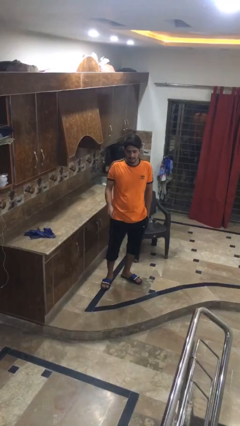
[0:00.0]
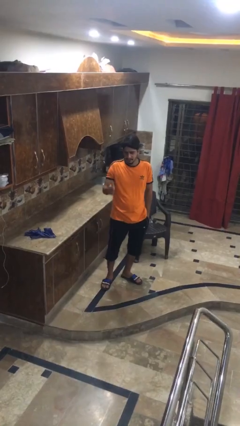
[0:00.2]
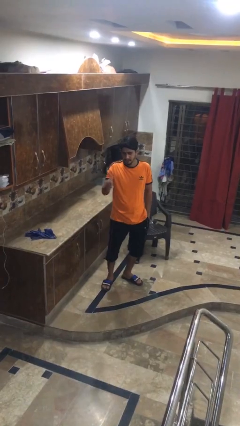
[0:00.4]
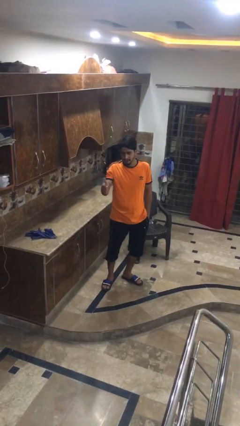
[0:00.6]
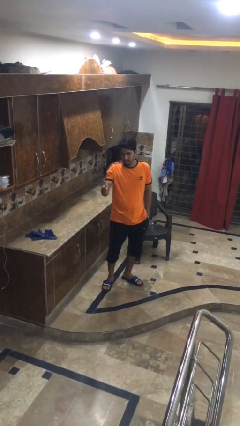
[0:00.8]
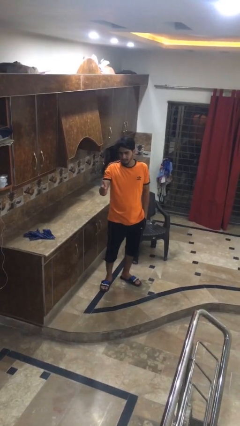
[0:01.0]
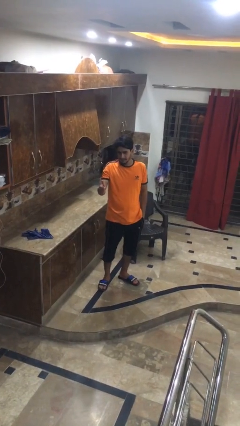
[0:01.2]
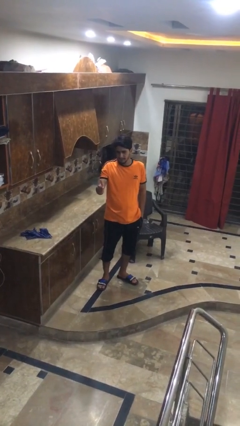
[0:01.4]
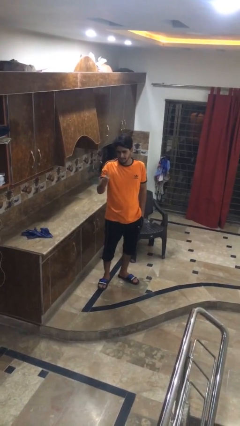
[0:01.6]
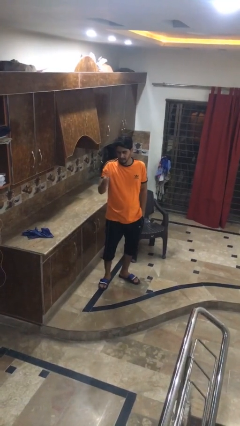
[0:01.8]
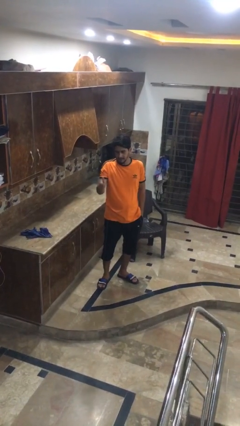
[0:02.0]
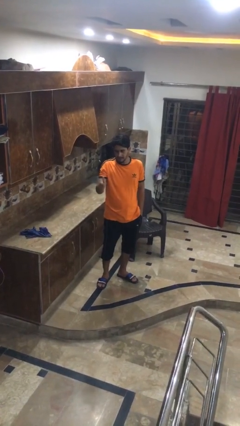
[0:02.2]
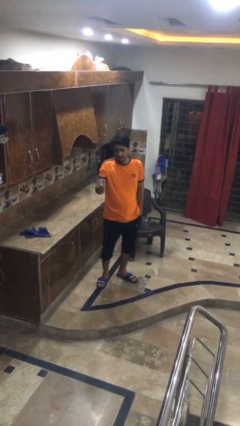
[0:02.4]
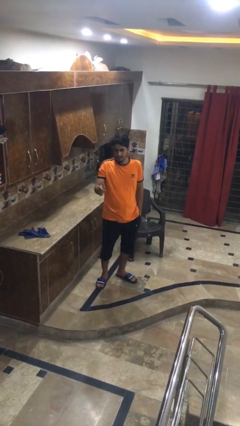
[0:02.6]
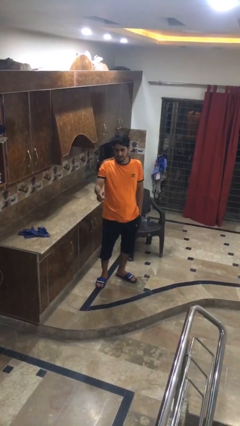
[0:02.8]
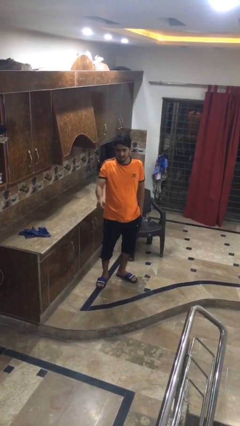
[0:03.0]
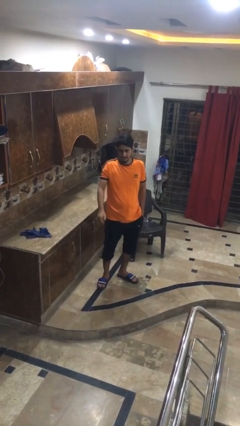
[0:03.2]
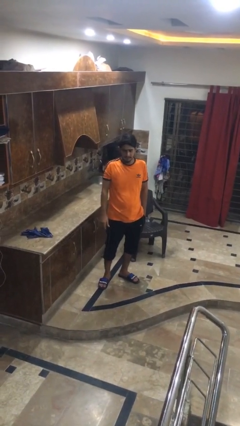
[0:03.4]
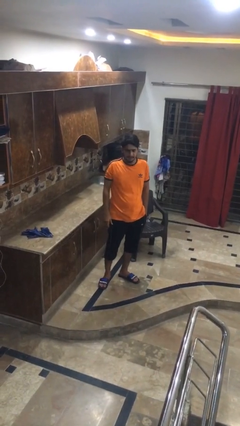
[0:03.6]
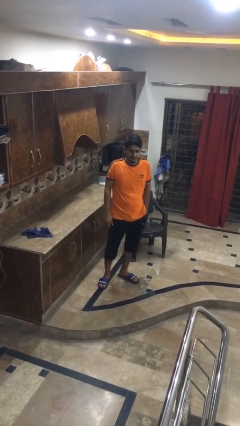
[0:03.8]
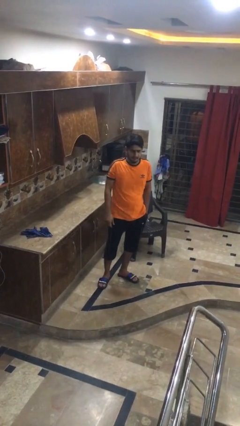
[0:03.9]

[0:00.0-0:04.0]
person gestures thumbs up

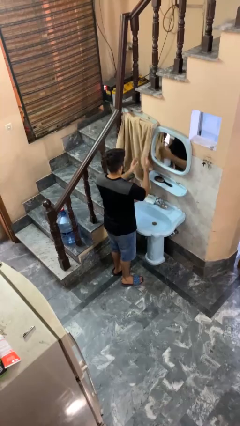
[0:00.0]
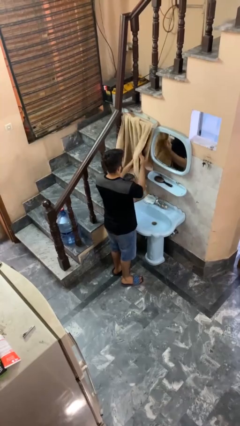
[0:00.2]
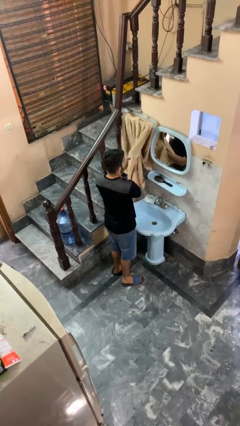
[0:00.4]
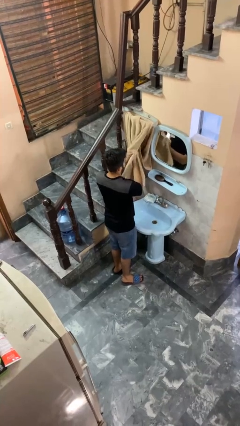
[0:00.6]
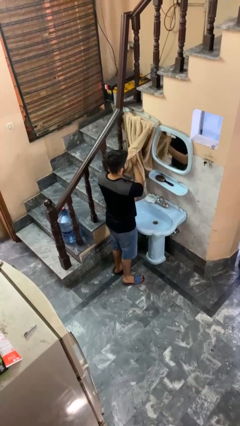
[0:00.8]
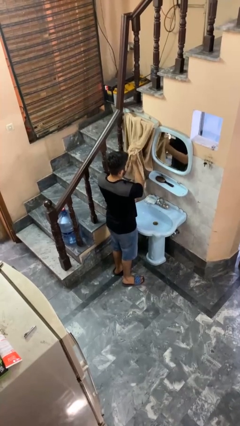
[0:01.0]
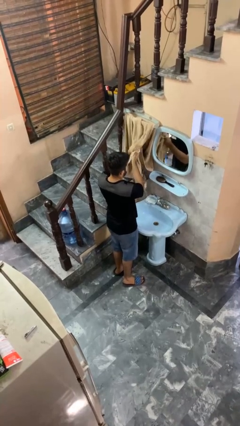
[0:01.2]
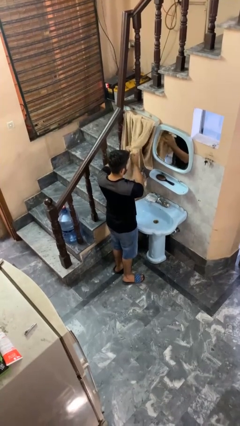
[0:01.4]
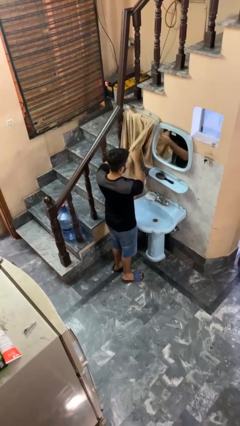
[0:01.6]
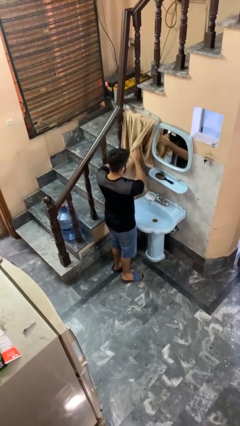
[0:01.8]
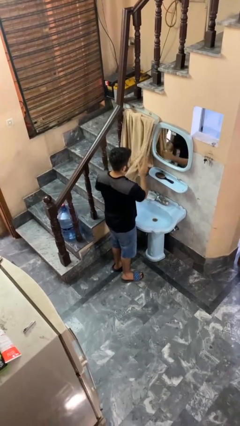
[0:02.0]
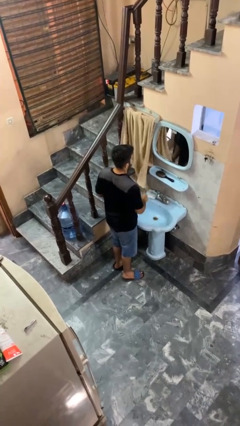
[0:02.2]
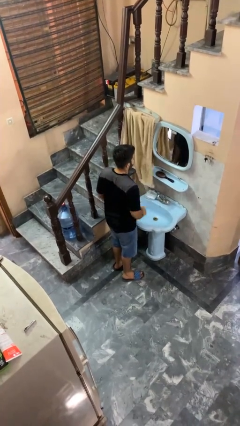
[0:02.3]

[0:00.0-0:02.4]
person dries hands with towel

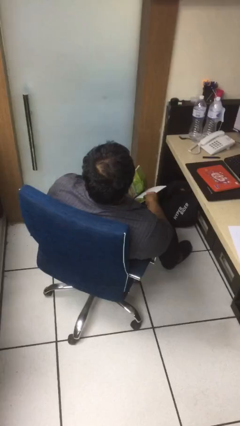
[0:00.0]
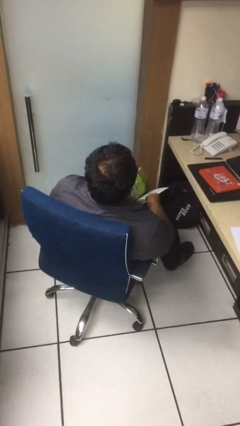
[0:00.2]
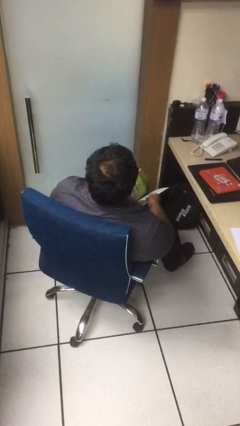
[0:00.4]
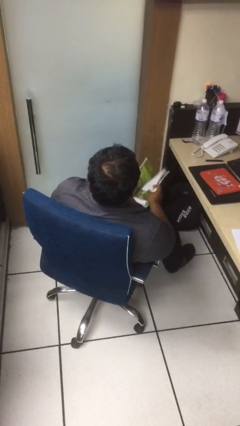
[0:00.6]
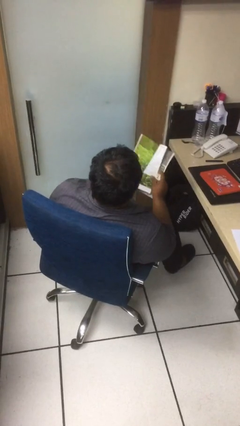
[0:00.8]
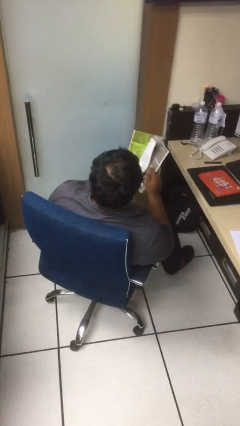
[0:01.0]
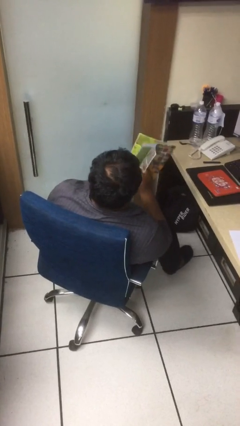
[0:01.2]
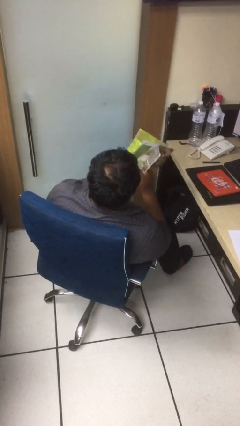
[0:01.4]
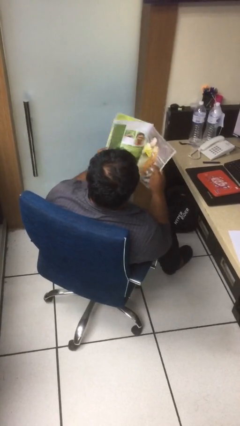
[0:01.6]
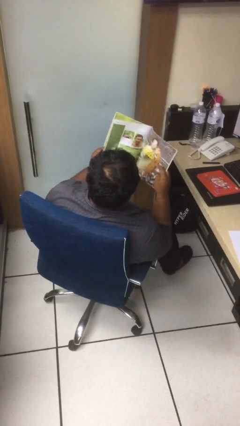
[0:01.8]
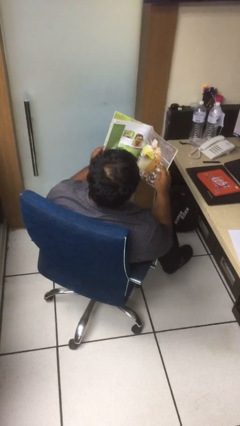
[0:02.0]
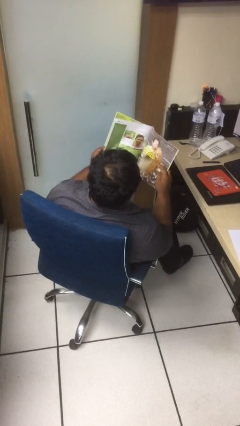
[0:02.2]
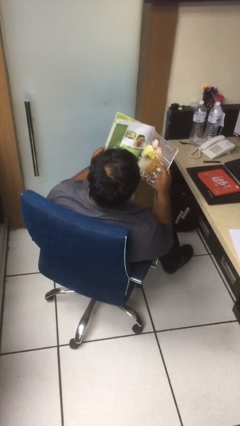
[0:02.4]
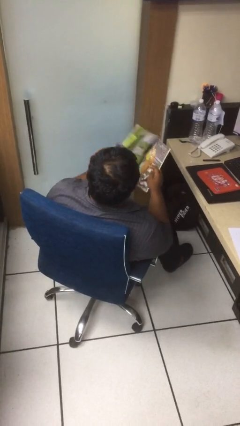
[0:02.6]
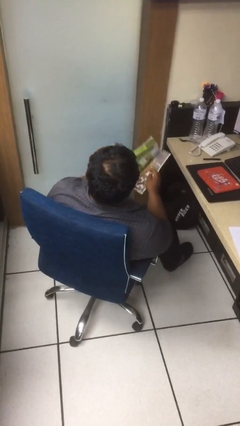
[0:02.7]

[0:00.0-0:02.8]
person reads magazine

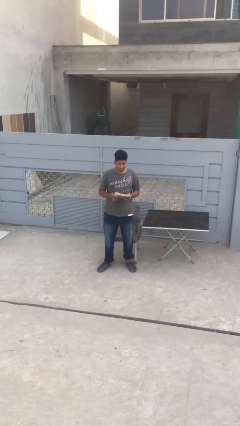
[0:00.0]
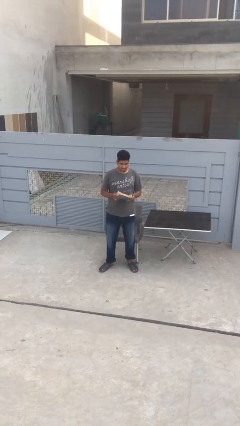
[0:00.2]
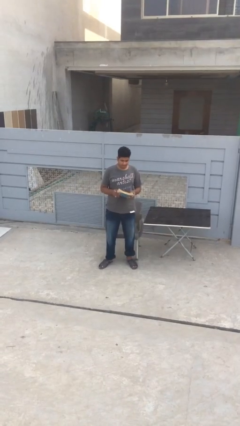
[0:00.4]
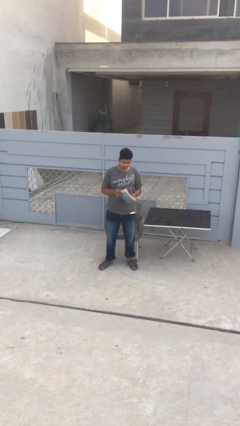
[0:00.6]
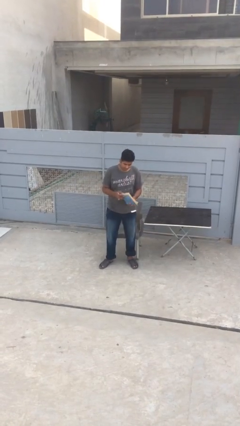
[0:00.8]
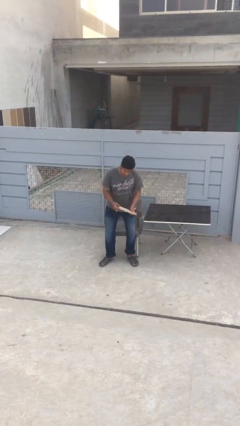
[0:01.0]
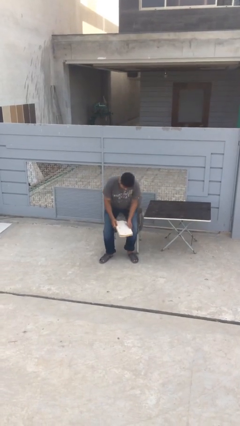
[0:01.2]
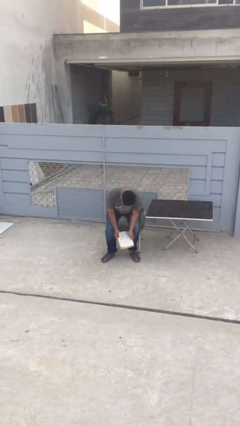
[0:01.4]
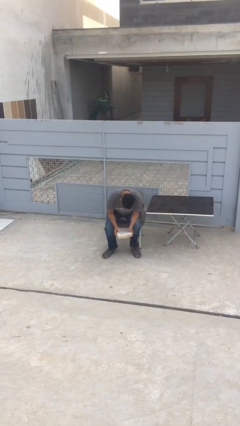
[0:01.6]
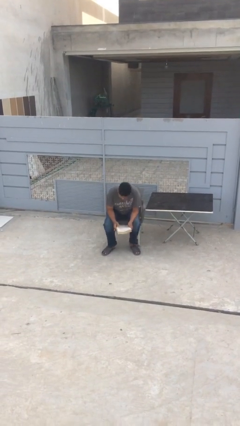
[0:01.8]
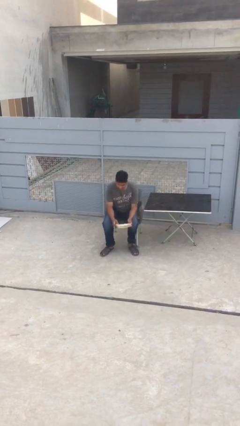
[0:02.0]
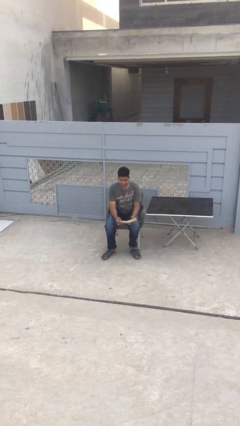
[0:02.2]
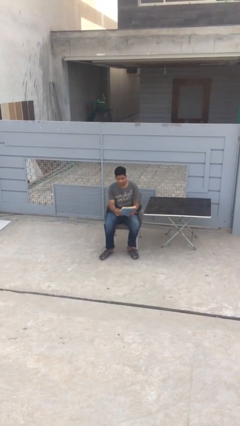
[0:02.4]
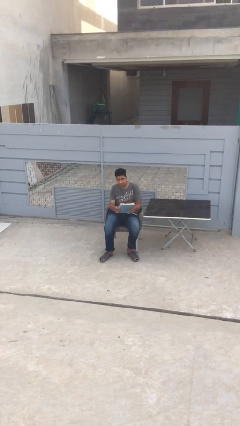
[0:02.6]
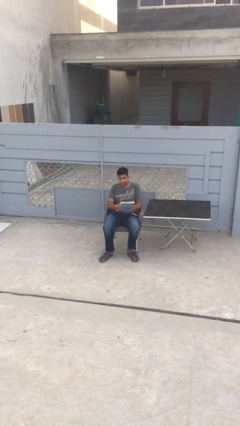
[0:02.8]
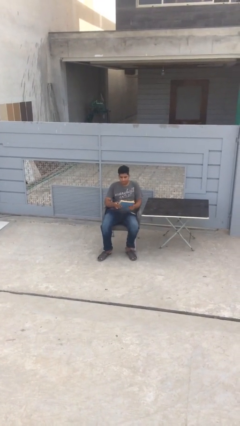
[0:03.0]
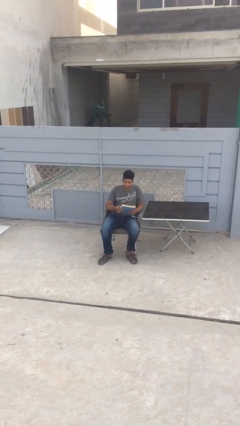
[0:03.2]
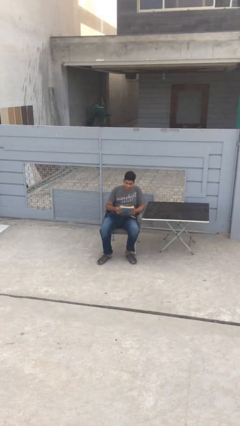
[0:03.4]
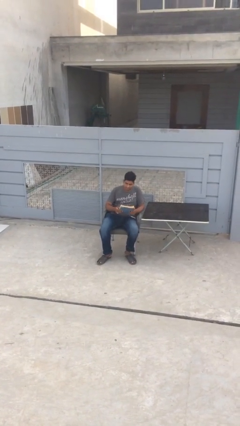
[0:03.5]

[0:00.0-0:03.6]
person sits down

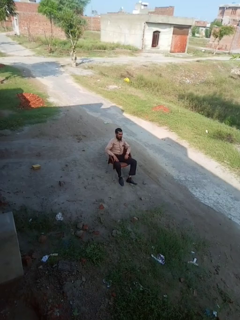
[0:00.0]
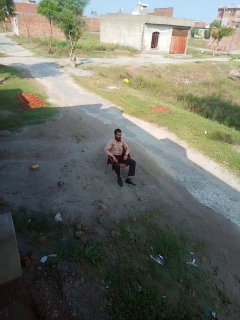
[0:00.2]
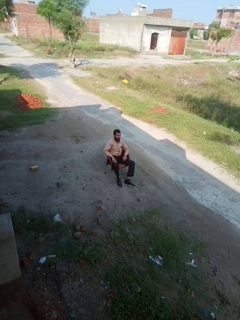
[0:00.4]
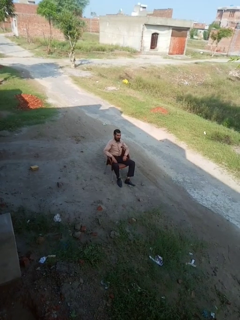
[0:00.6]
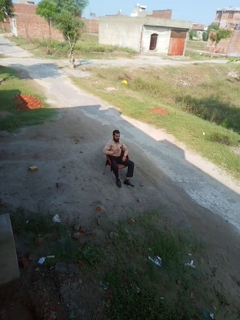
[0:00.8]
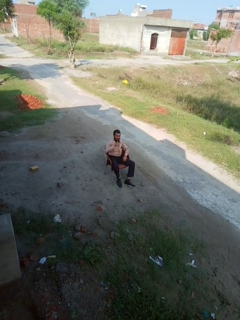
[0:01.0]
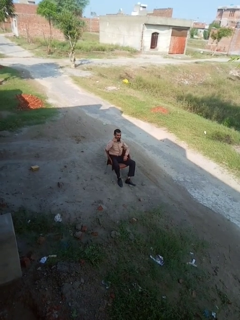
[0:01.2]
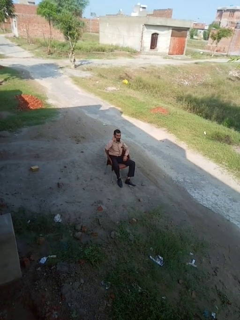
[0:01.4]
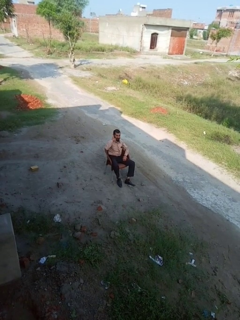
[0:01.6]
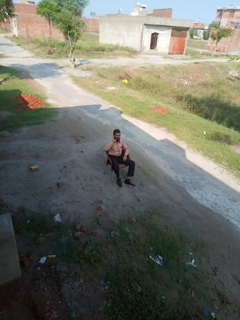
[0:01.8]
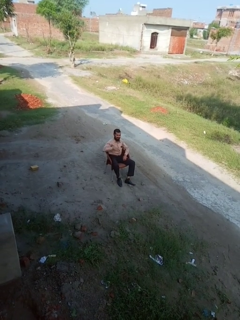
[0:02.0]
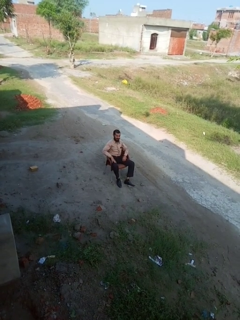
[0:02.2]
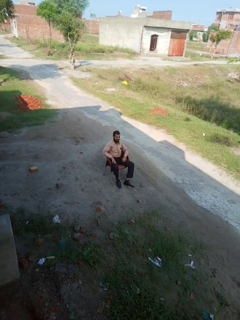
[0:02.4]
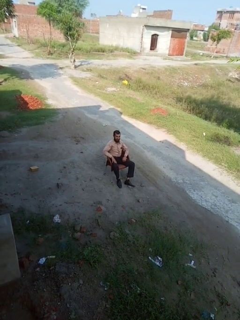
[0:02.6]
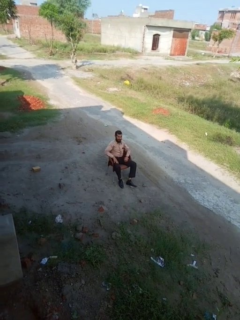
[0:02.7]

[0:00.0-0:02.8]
person gestures call me

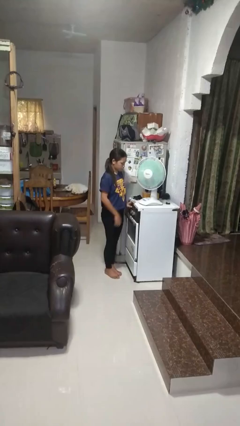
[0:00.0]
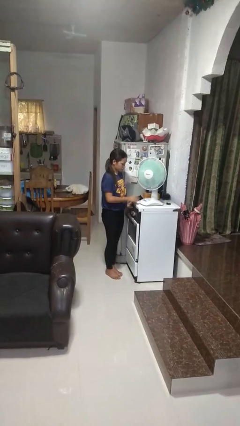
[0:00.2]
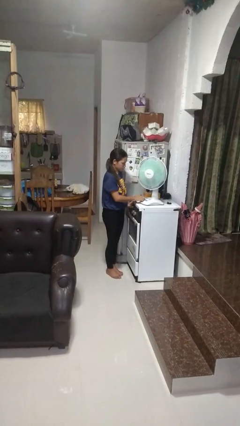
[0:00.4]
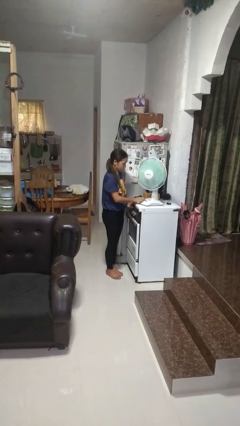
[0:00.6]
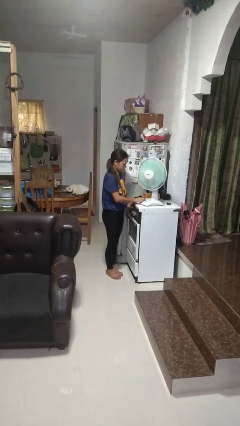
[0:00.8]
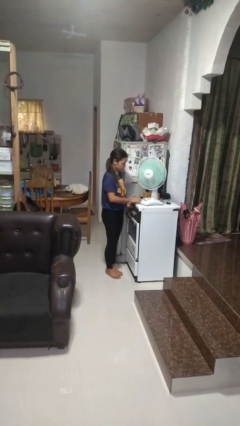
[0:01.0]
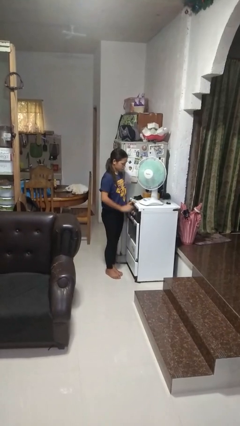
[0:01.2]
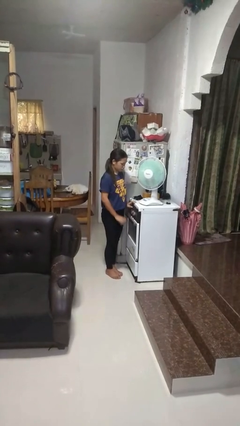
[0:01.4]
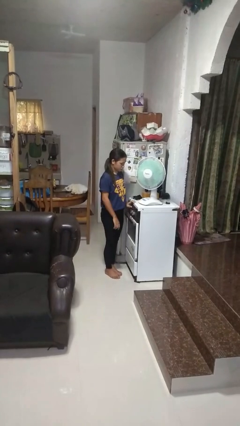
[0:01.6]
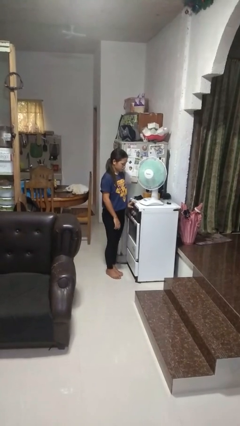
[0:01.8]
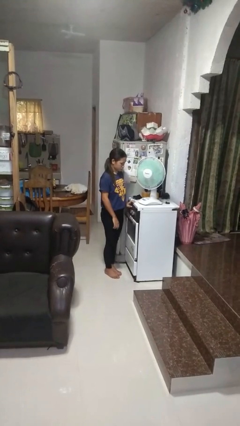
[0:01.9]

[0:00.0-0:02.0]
person turns off fan
